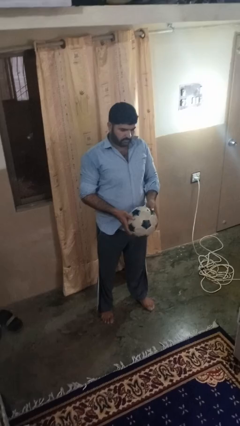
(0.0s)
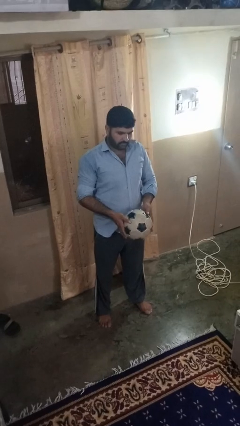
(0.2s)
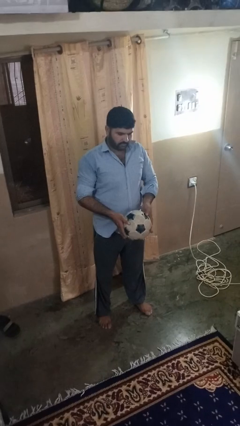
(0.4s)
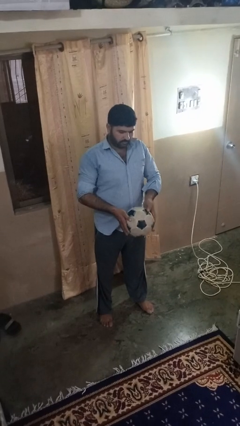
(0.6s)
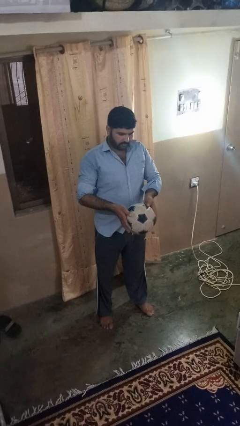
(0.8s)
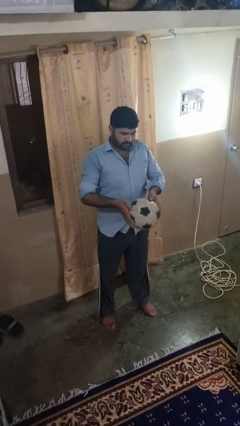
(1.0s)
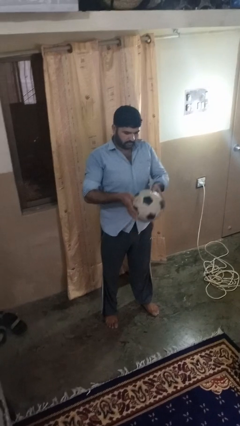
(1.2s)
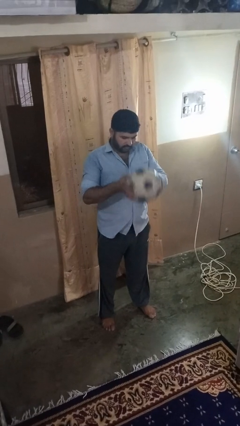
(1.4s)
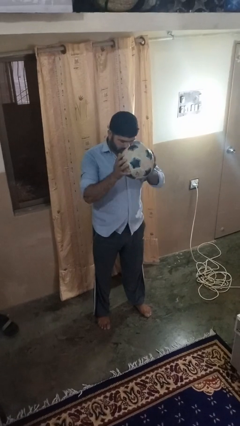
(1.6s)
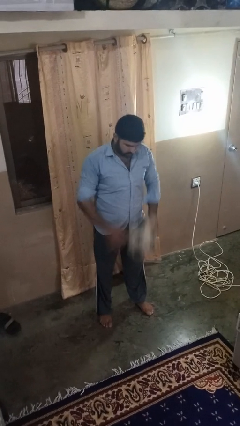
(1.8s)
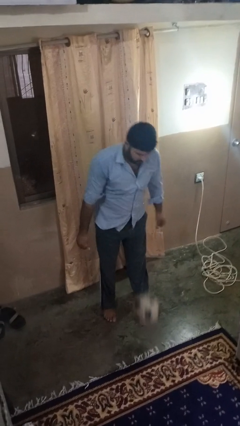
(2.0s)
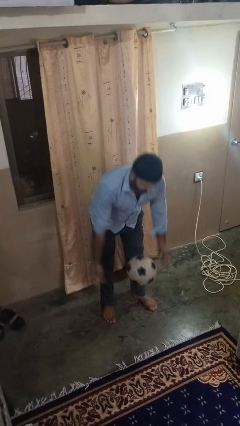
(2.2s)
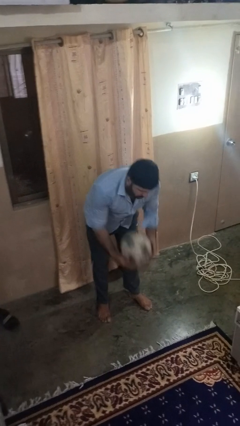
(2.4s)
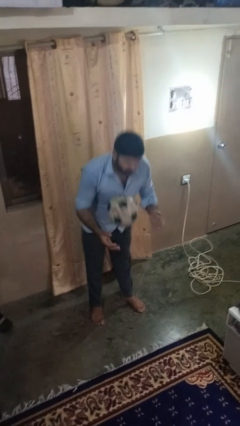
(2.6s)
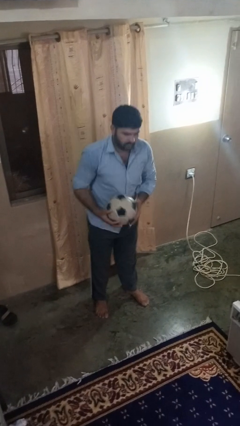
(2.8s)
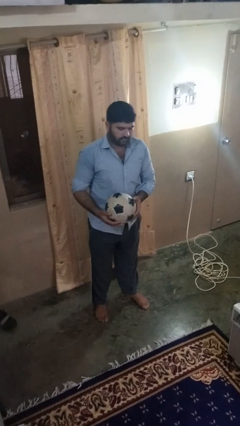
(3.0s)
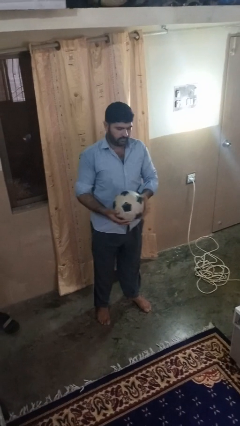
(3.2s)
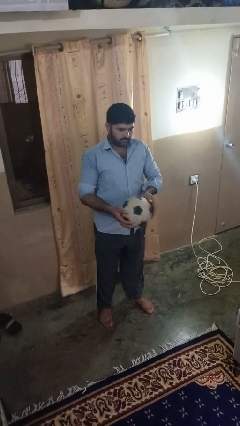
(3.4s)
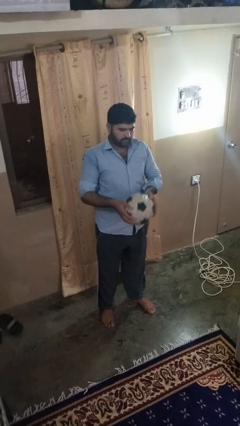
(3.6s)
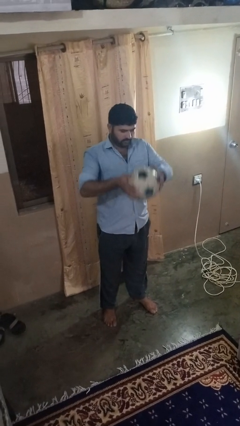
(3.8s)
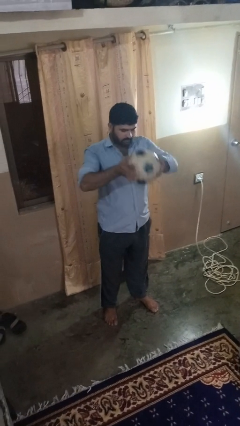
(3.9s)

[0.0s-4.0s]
person bounces ball on floor

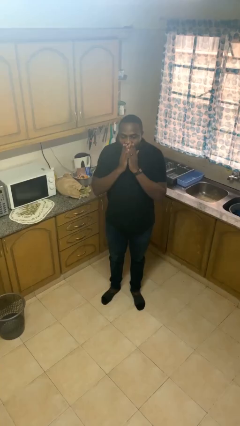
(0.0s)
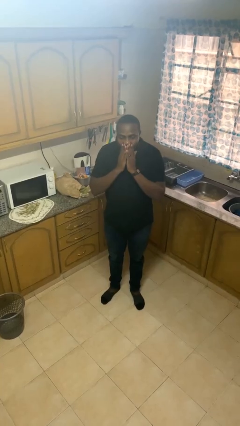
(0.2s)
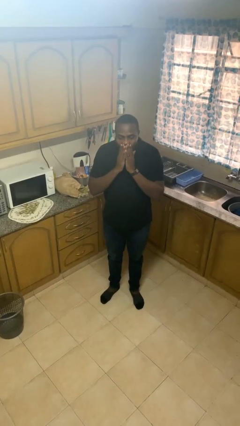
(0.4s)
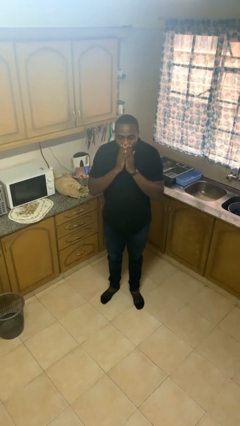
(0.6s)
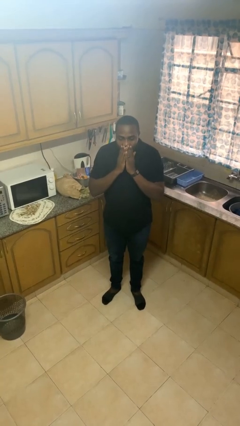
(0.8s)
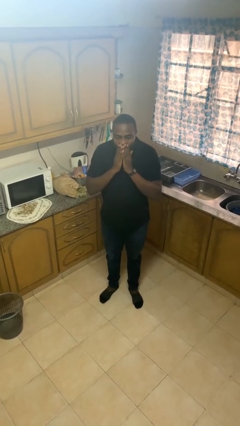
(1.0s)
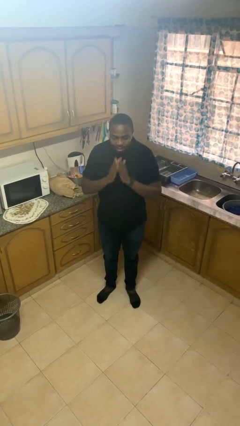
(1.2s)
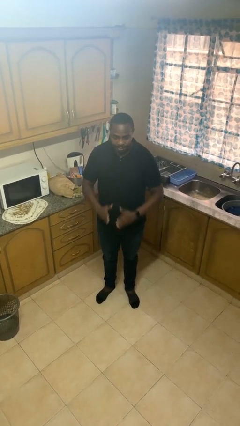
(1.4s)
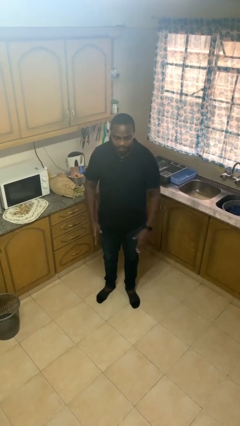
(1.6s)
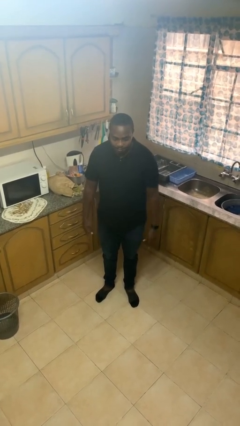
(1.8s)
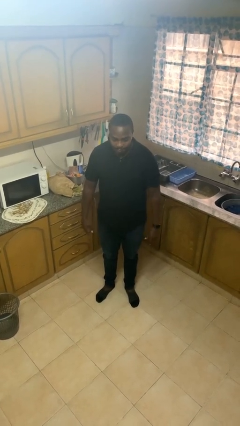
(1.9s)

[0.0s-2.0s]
person yawns

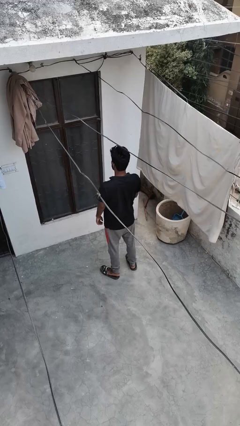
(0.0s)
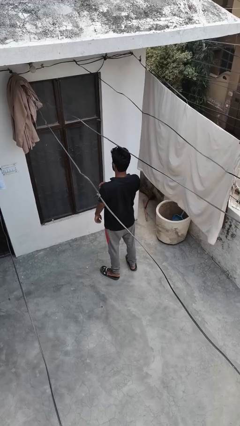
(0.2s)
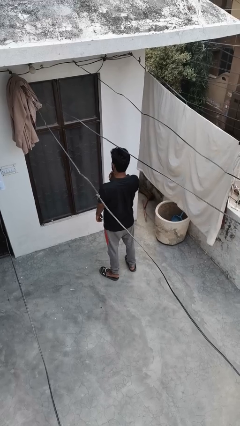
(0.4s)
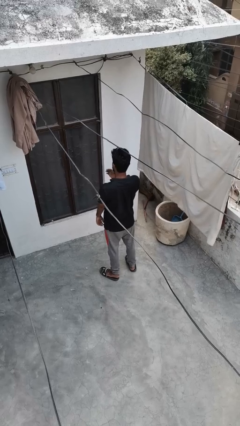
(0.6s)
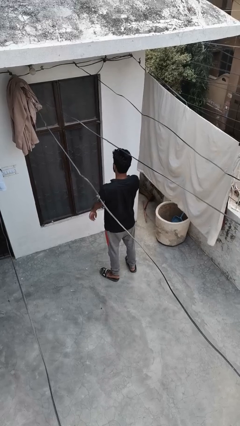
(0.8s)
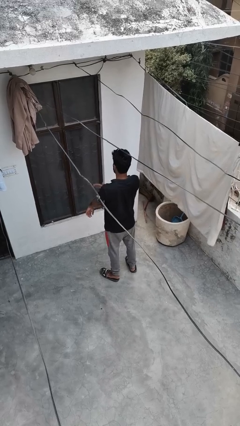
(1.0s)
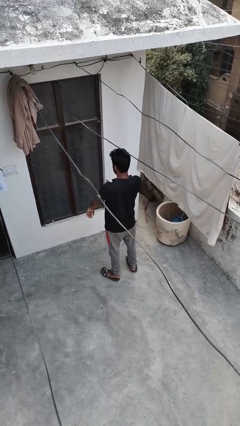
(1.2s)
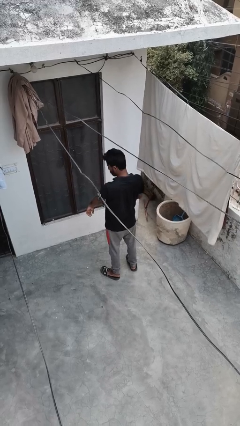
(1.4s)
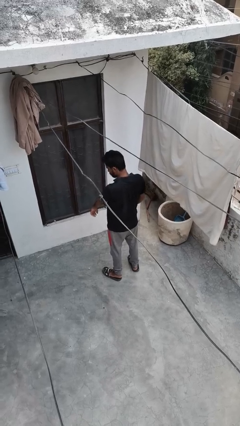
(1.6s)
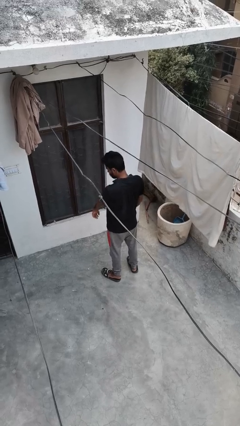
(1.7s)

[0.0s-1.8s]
person swats bug

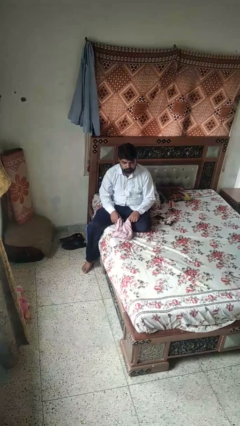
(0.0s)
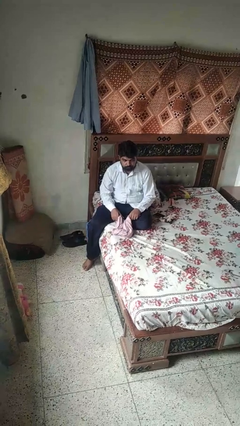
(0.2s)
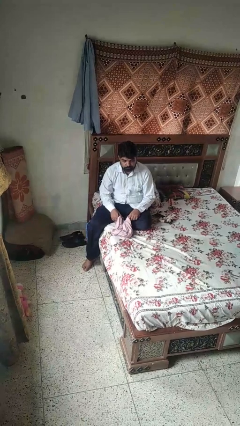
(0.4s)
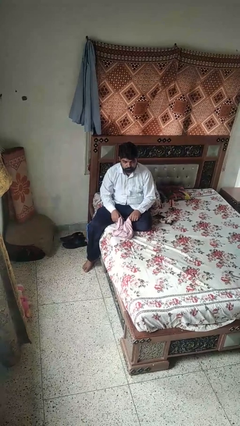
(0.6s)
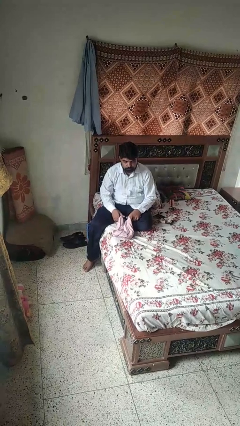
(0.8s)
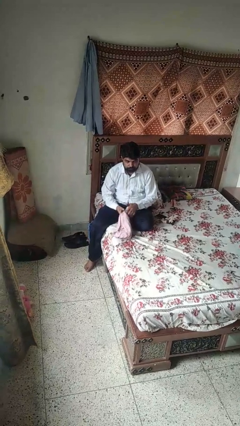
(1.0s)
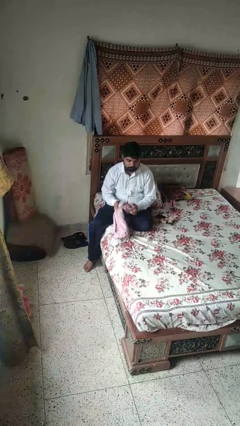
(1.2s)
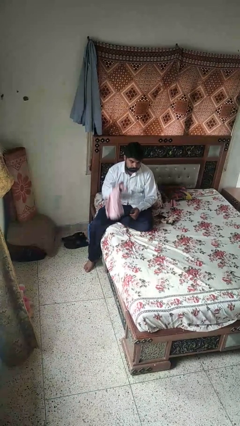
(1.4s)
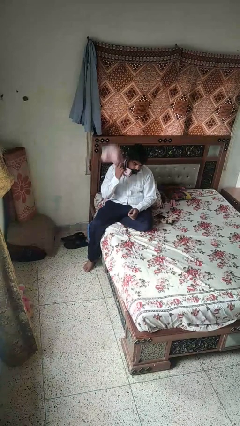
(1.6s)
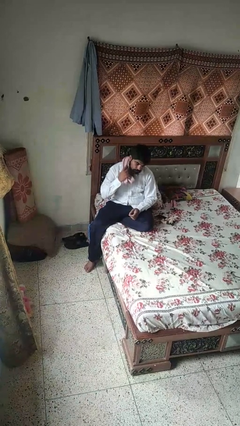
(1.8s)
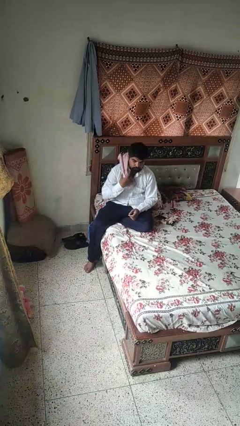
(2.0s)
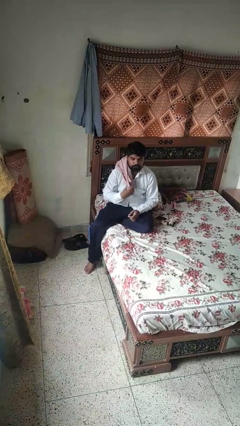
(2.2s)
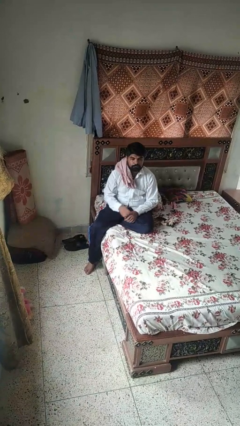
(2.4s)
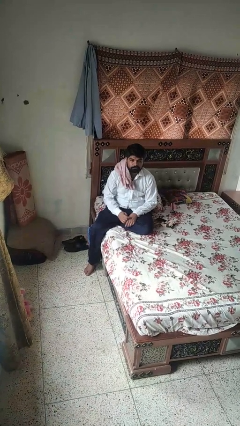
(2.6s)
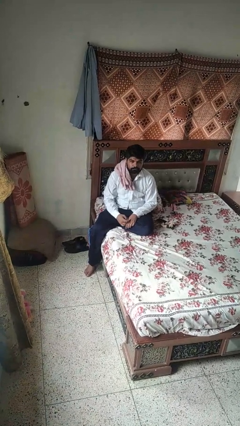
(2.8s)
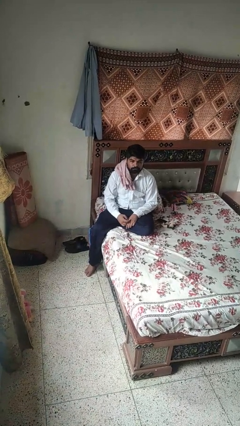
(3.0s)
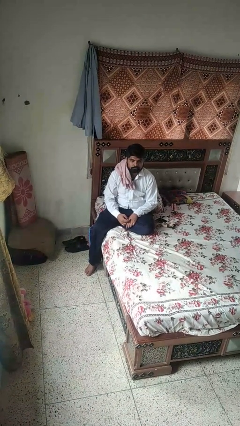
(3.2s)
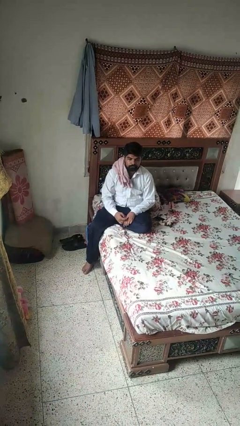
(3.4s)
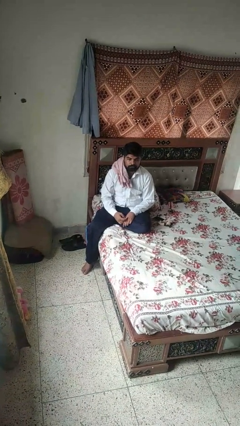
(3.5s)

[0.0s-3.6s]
person puts on scarf

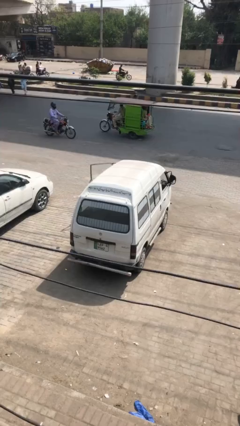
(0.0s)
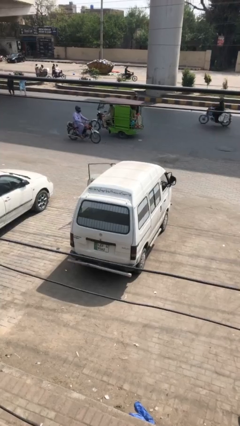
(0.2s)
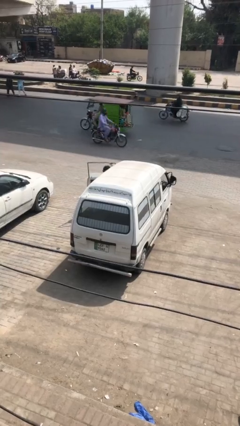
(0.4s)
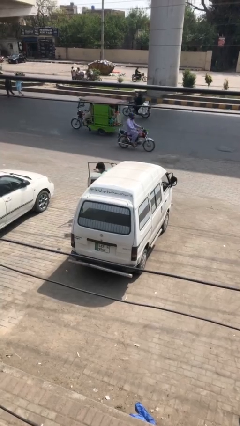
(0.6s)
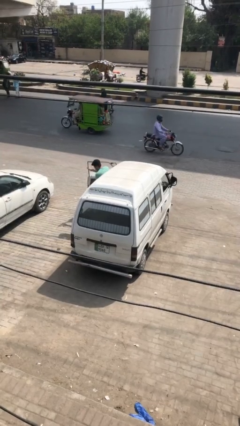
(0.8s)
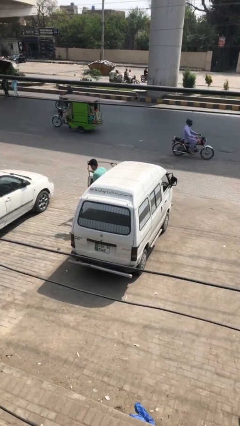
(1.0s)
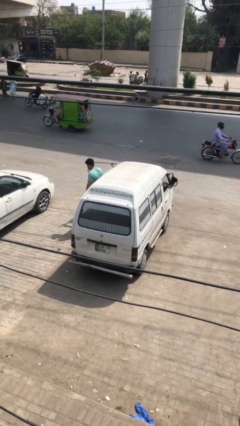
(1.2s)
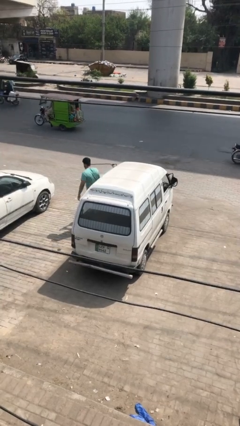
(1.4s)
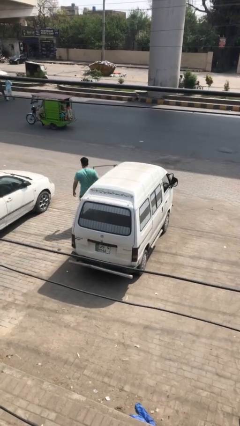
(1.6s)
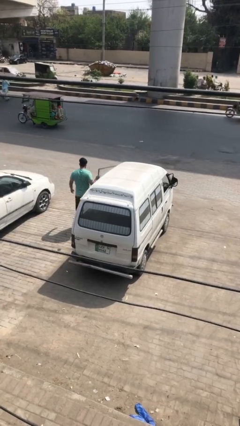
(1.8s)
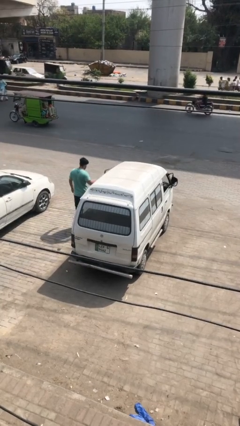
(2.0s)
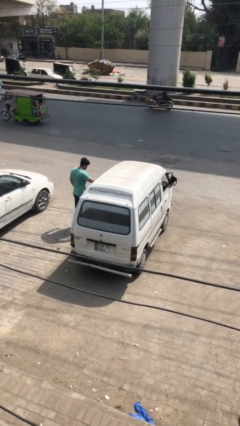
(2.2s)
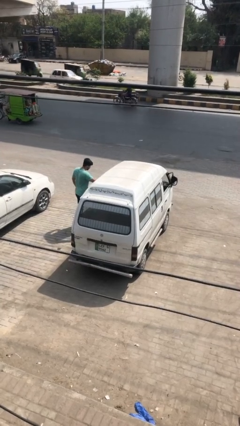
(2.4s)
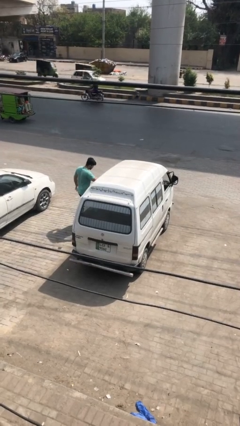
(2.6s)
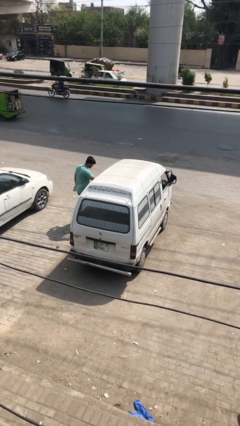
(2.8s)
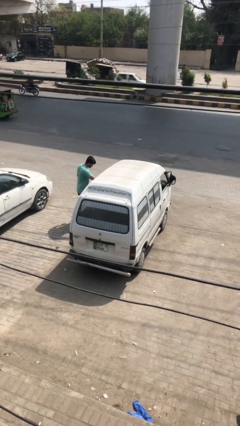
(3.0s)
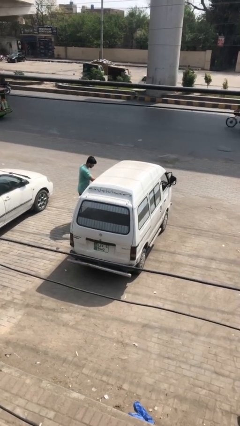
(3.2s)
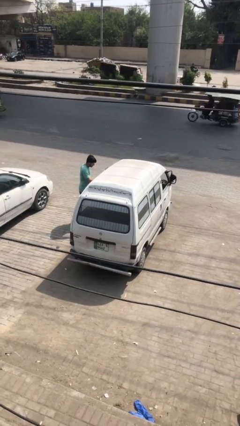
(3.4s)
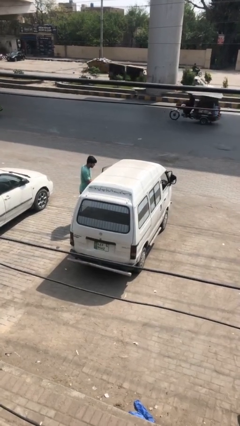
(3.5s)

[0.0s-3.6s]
car drops off person

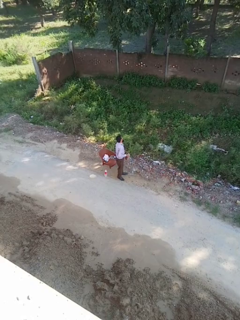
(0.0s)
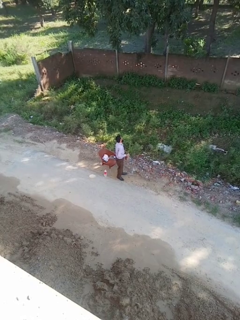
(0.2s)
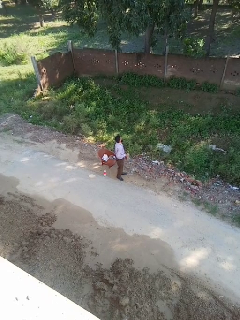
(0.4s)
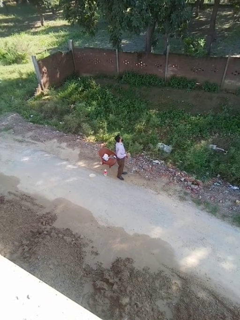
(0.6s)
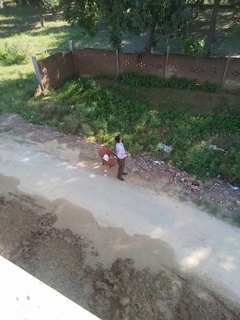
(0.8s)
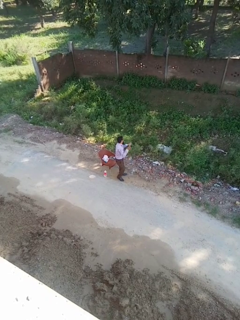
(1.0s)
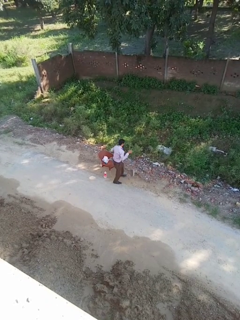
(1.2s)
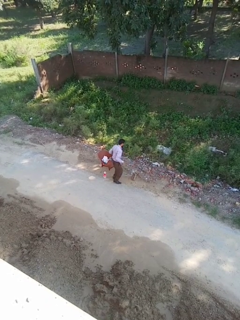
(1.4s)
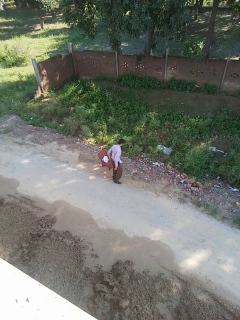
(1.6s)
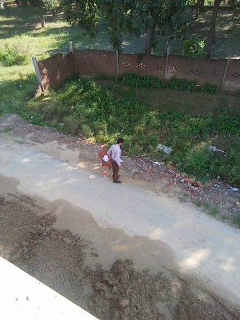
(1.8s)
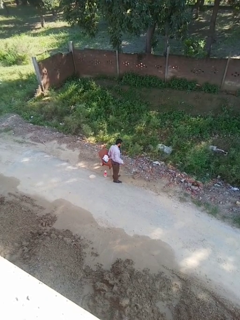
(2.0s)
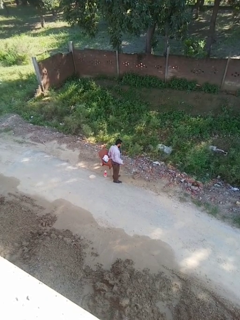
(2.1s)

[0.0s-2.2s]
person drops object

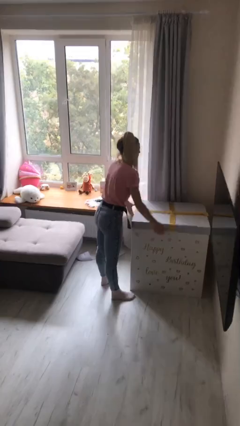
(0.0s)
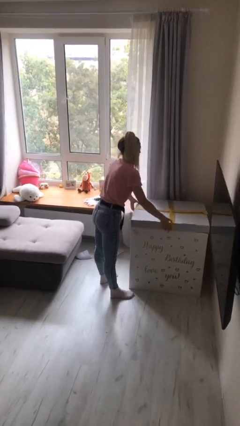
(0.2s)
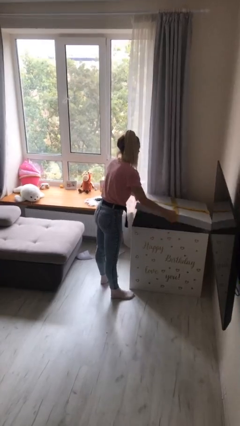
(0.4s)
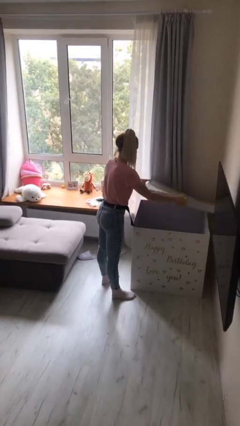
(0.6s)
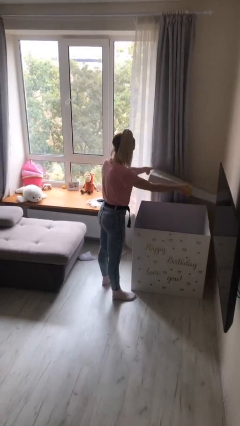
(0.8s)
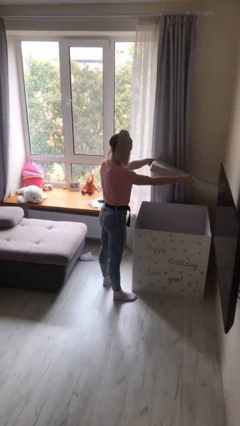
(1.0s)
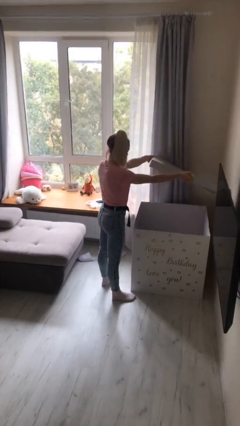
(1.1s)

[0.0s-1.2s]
person opens box
